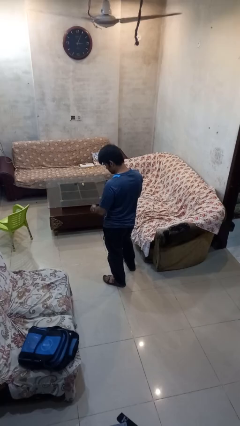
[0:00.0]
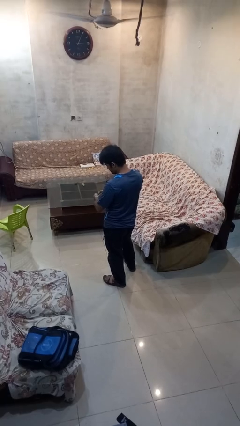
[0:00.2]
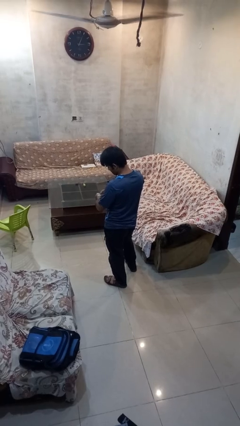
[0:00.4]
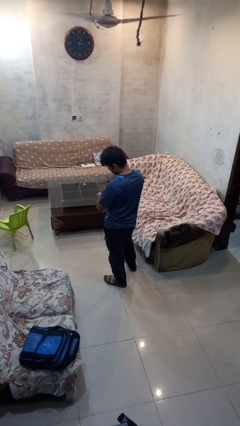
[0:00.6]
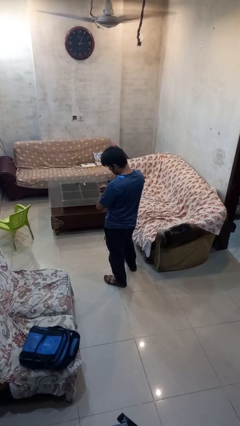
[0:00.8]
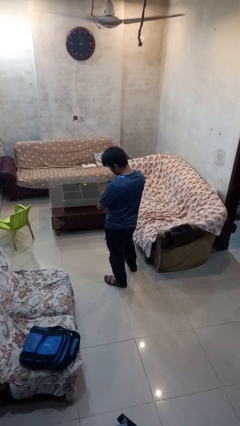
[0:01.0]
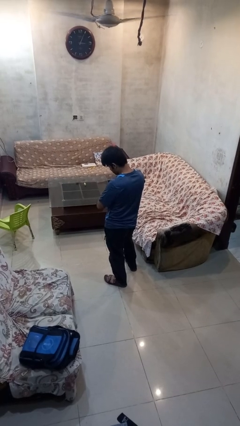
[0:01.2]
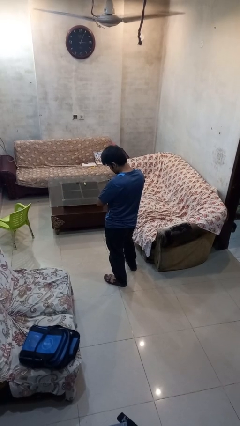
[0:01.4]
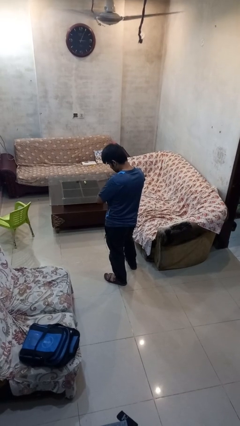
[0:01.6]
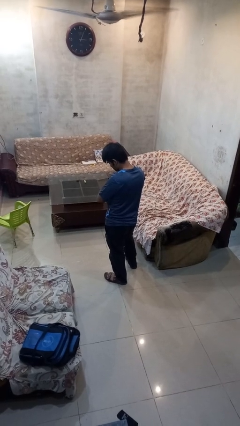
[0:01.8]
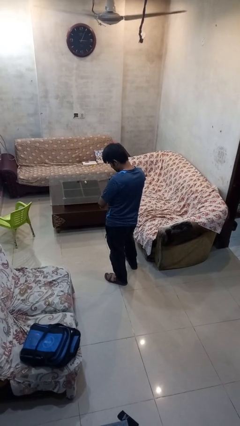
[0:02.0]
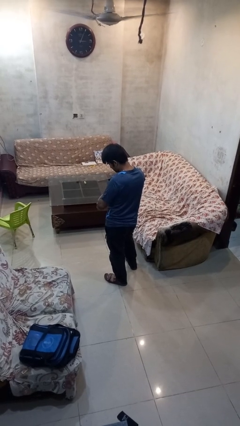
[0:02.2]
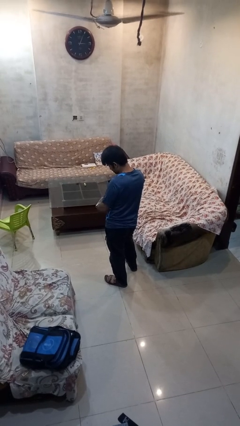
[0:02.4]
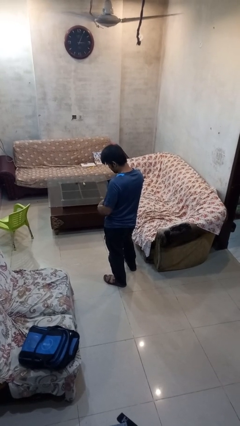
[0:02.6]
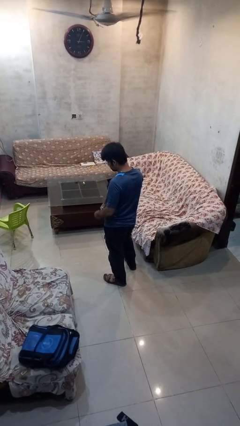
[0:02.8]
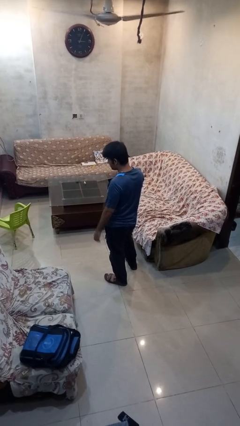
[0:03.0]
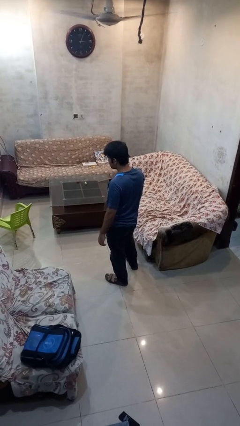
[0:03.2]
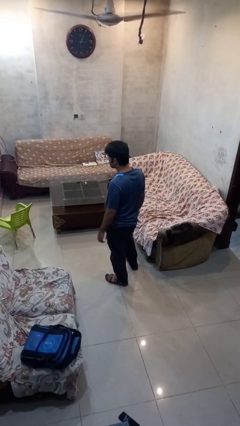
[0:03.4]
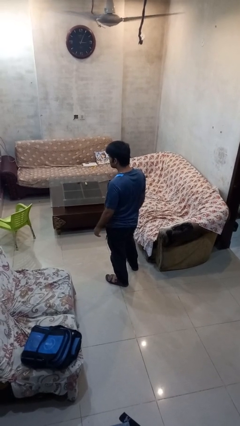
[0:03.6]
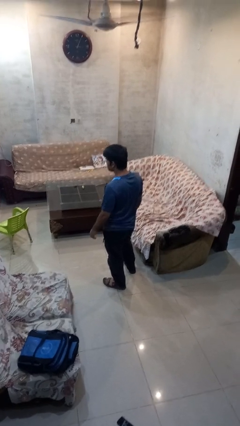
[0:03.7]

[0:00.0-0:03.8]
person takes off wristwatch

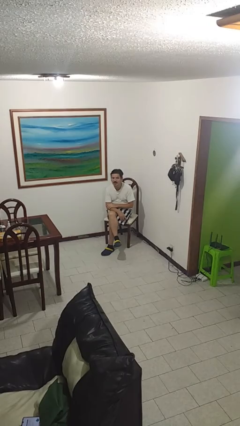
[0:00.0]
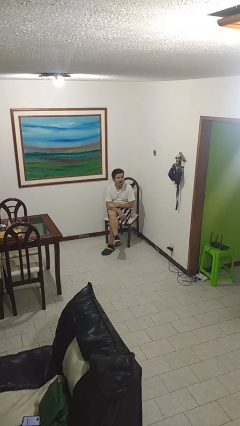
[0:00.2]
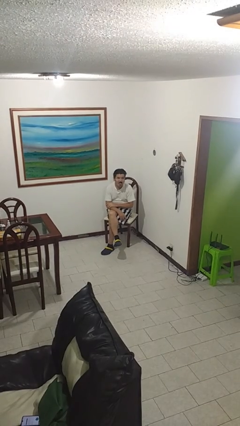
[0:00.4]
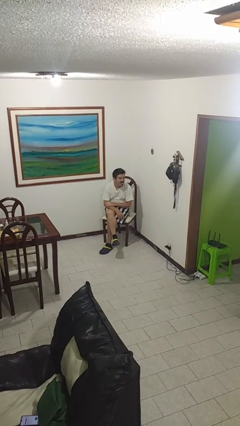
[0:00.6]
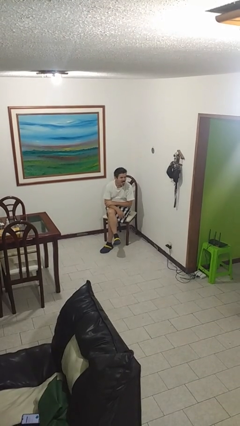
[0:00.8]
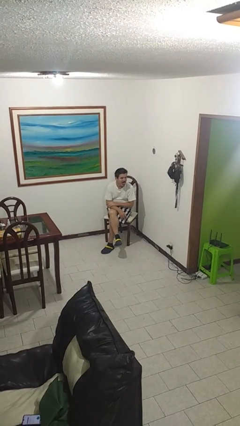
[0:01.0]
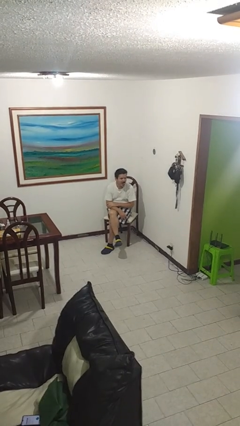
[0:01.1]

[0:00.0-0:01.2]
person sticks out tongue

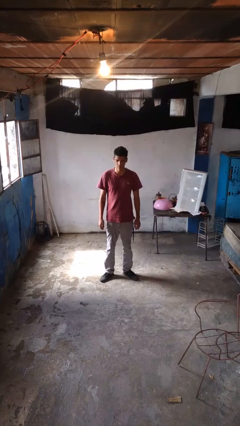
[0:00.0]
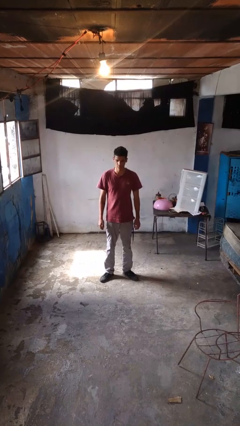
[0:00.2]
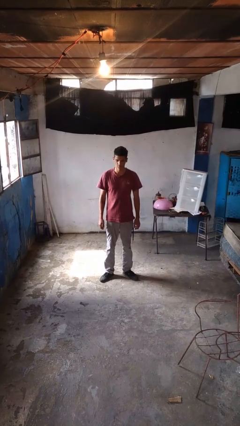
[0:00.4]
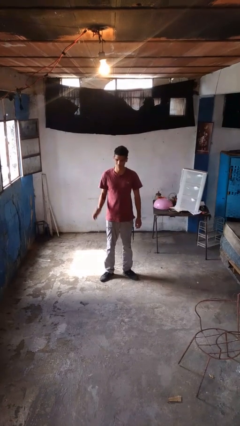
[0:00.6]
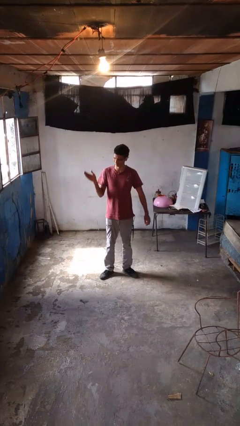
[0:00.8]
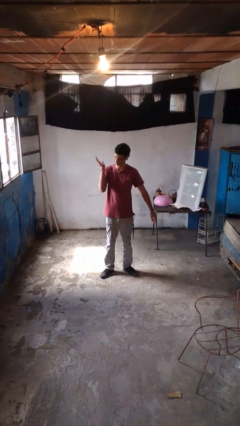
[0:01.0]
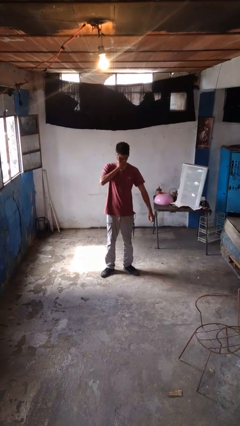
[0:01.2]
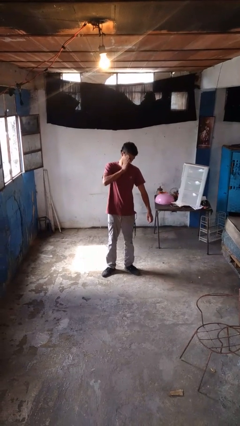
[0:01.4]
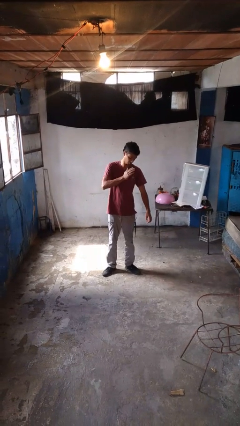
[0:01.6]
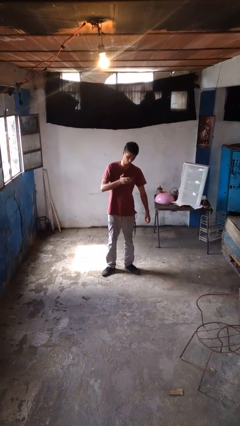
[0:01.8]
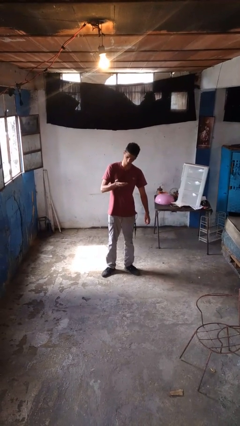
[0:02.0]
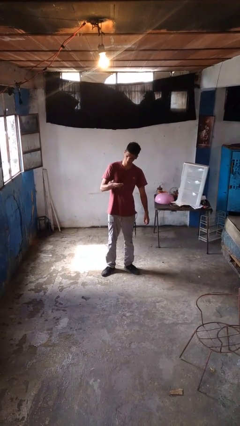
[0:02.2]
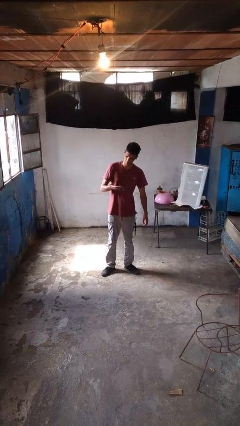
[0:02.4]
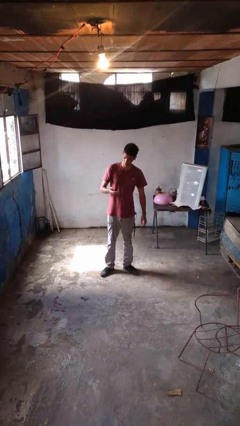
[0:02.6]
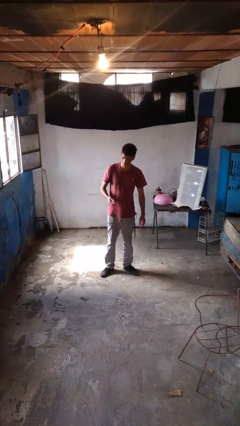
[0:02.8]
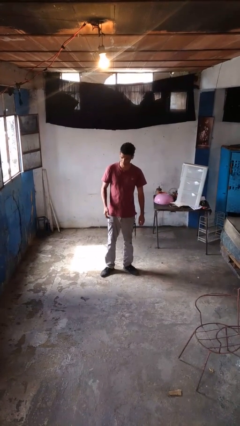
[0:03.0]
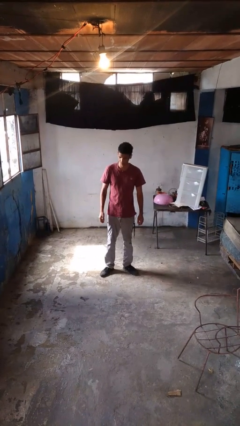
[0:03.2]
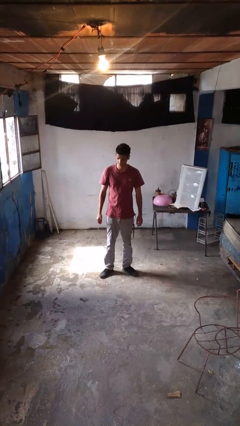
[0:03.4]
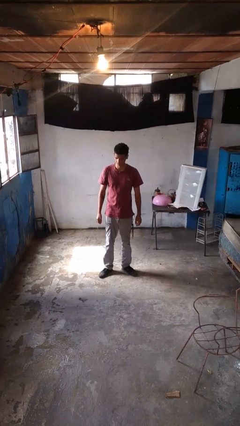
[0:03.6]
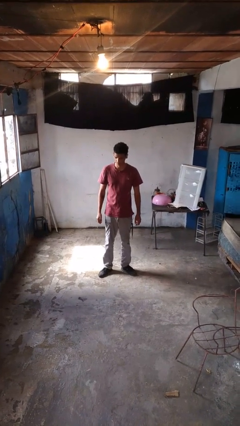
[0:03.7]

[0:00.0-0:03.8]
person swats bug

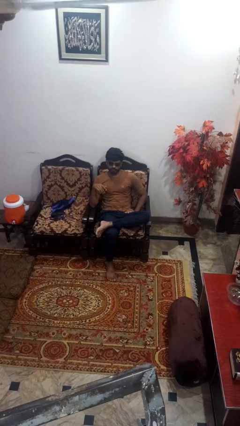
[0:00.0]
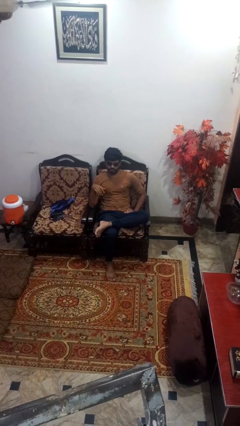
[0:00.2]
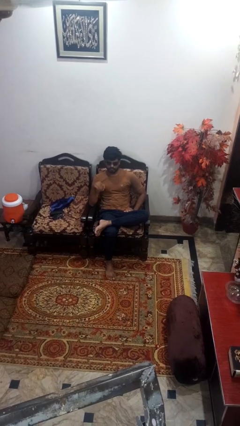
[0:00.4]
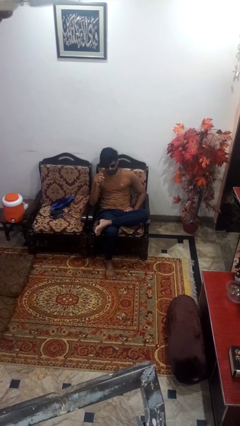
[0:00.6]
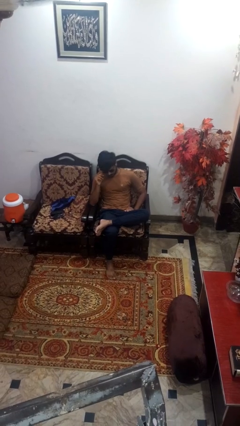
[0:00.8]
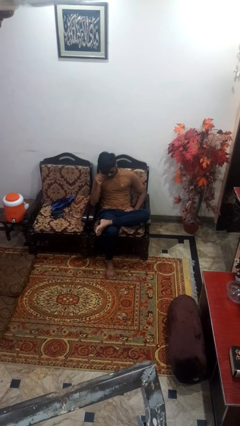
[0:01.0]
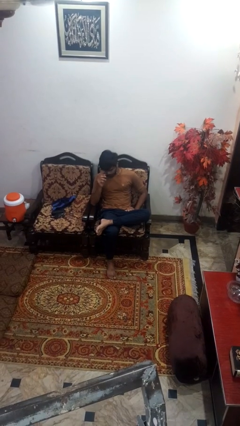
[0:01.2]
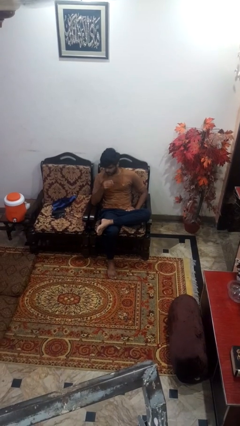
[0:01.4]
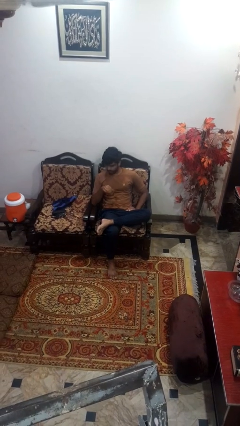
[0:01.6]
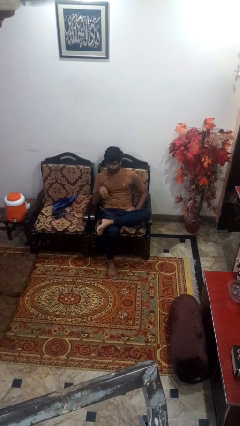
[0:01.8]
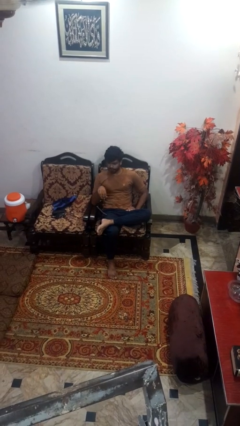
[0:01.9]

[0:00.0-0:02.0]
person takes off sunglasses

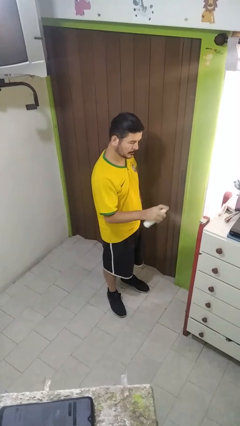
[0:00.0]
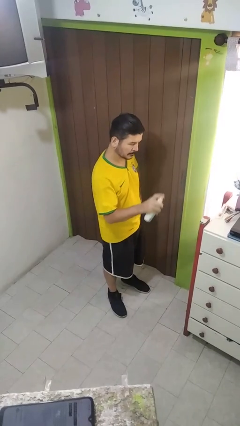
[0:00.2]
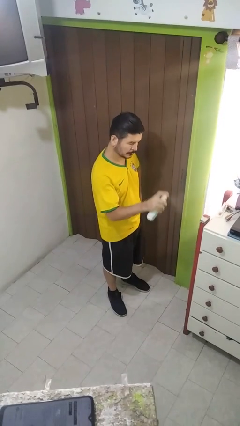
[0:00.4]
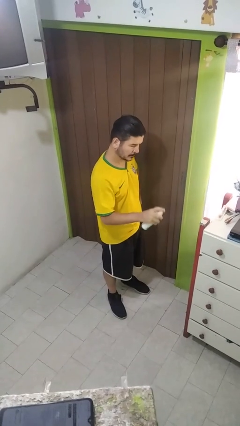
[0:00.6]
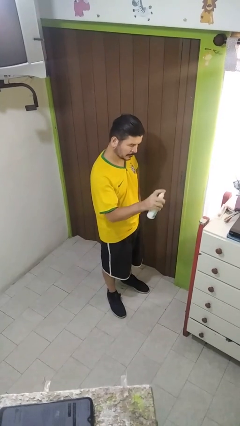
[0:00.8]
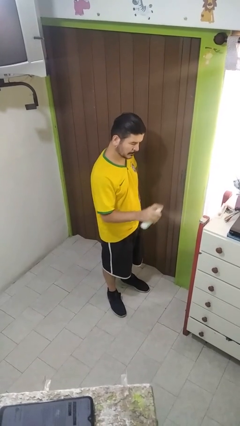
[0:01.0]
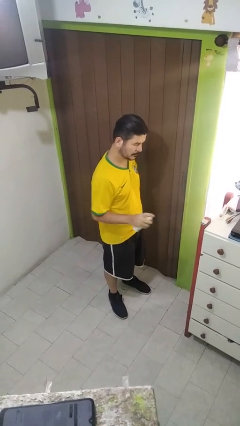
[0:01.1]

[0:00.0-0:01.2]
person sprays from bottle

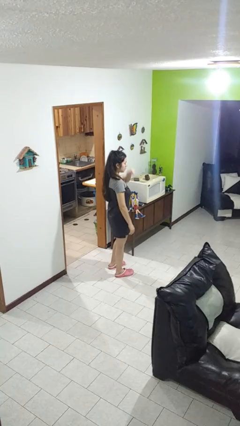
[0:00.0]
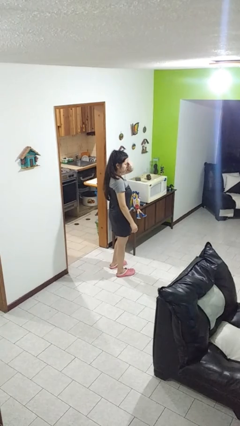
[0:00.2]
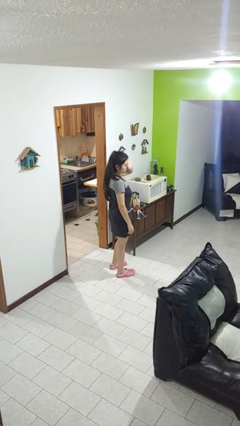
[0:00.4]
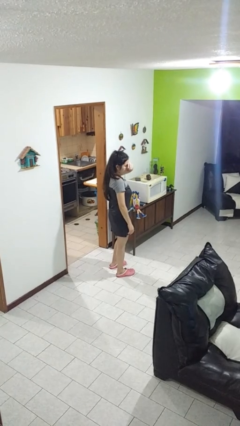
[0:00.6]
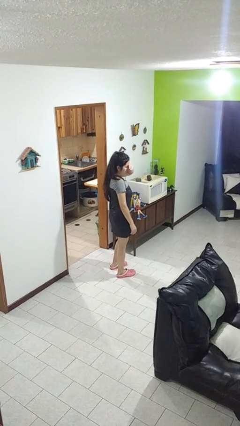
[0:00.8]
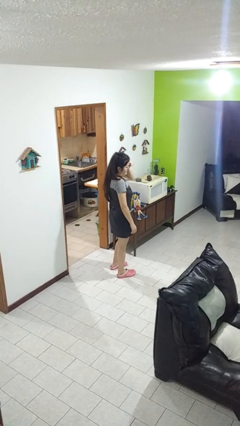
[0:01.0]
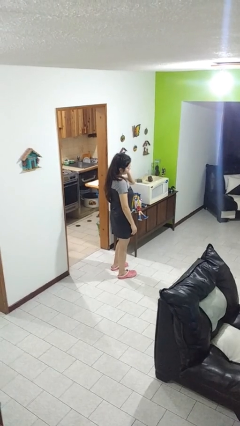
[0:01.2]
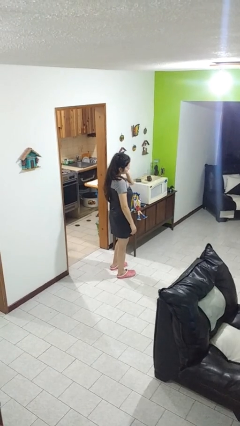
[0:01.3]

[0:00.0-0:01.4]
person rubs eyes

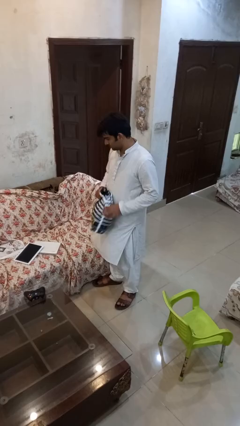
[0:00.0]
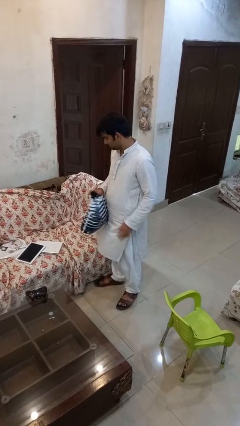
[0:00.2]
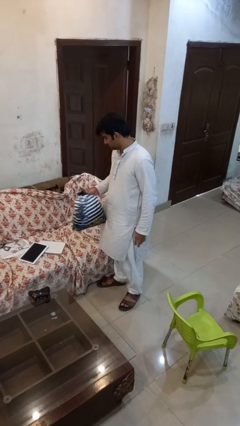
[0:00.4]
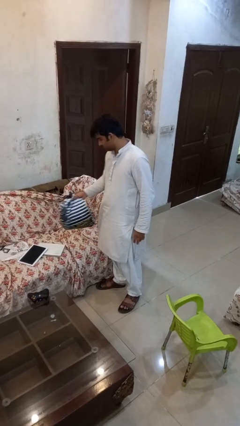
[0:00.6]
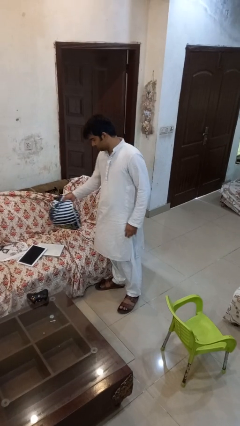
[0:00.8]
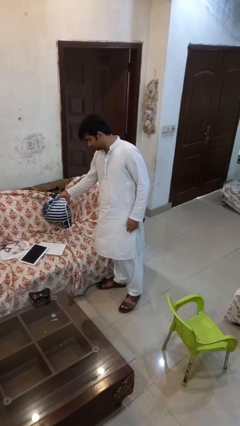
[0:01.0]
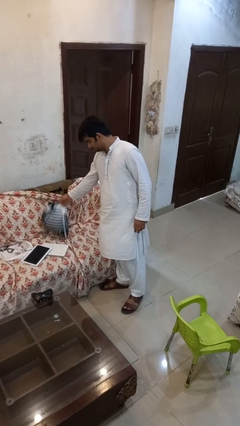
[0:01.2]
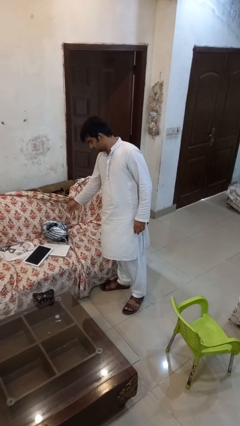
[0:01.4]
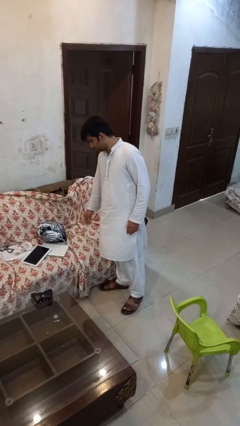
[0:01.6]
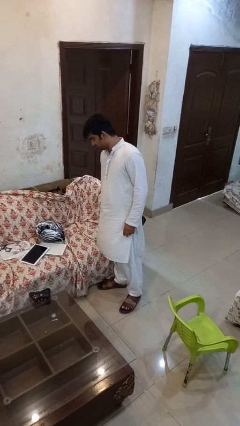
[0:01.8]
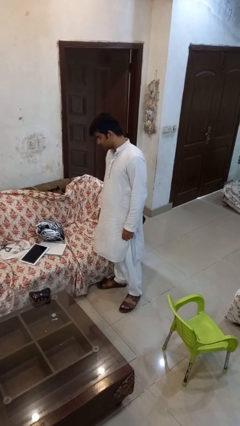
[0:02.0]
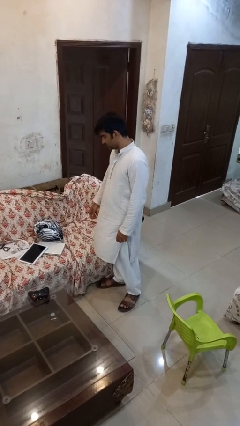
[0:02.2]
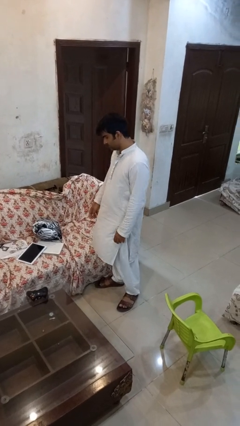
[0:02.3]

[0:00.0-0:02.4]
person puts down object on couch

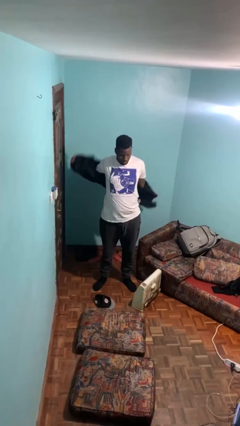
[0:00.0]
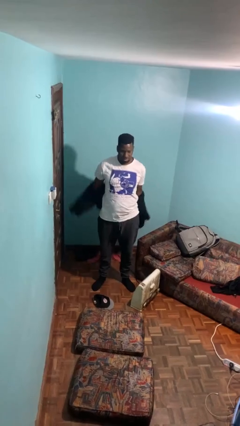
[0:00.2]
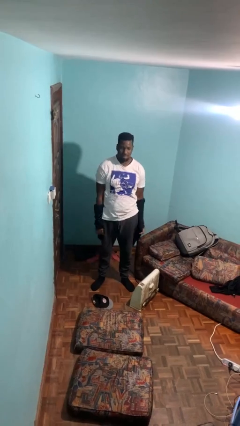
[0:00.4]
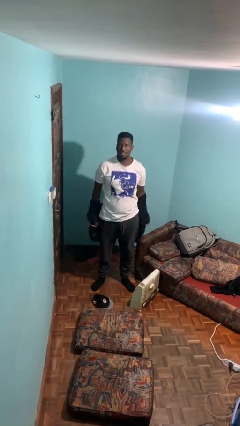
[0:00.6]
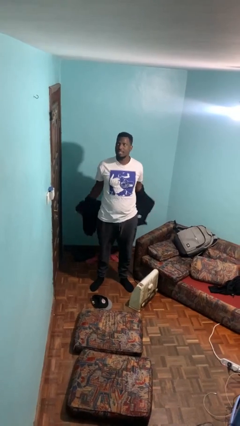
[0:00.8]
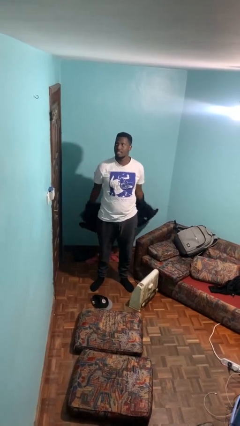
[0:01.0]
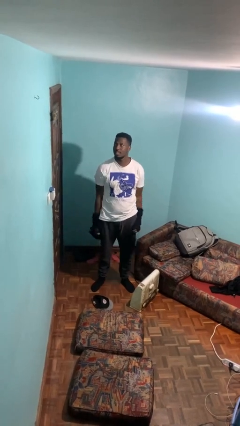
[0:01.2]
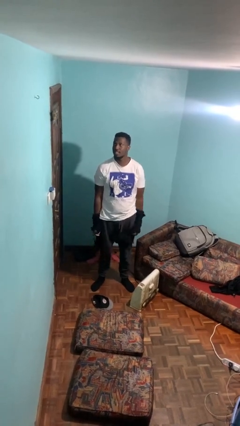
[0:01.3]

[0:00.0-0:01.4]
person takes off jacket

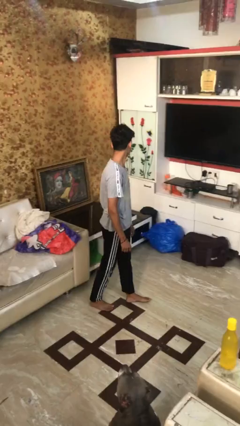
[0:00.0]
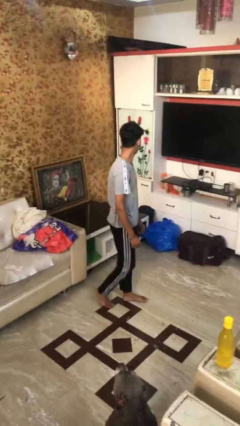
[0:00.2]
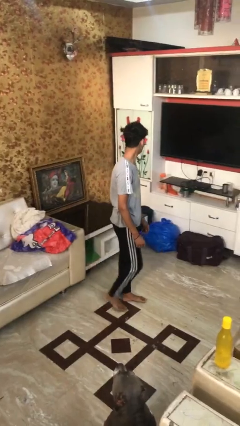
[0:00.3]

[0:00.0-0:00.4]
person bumps into person
